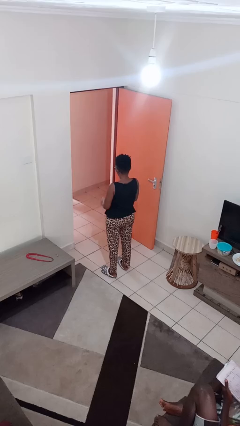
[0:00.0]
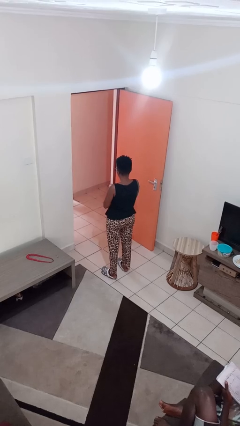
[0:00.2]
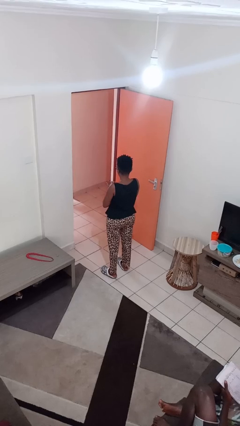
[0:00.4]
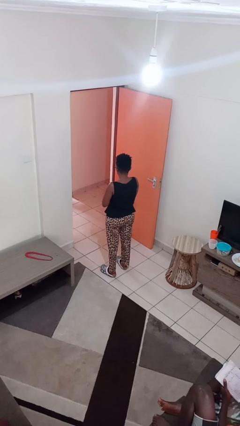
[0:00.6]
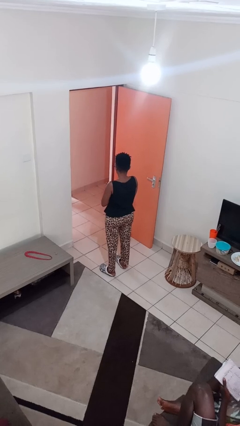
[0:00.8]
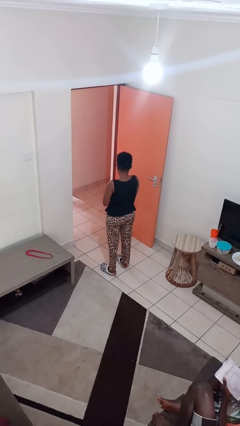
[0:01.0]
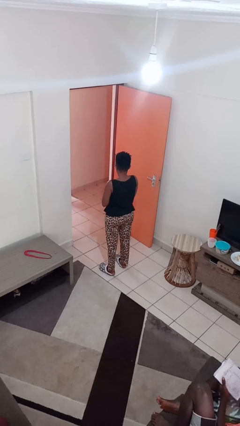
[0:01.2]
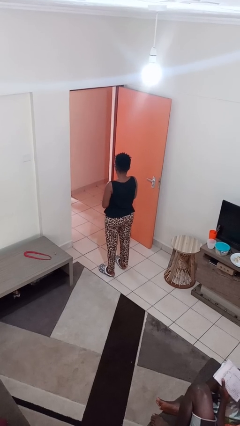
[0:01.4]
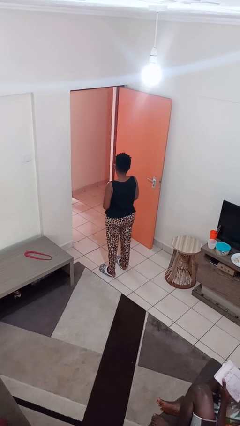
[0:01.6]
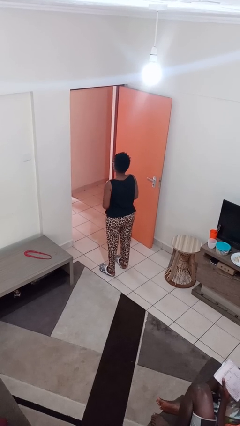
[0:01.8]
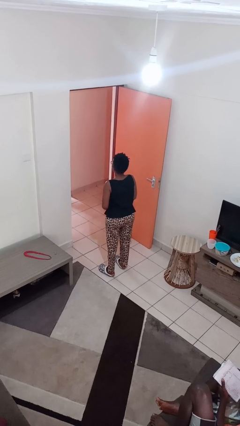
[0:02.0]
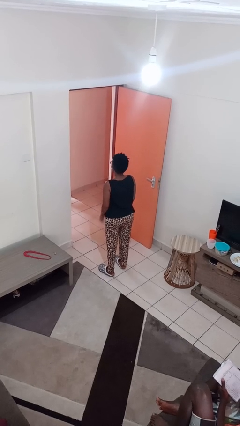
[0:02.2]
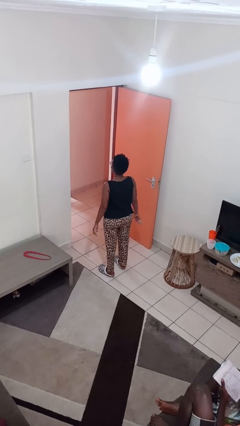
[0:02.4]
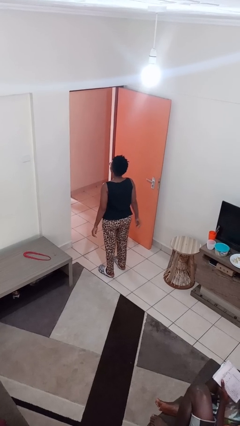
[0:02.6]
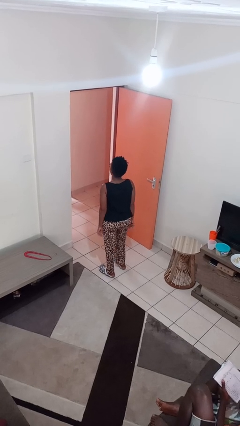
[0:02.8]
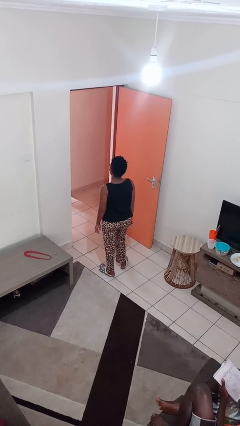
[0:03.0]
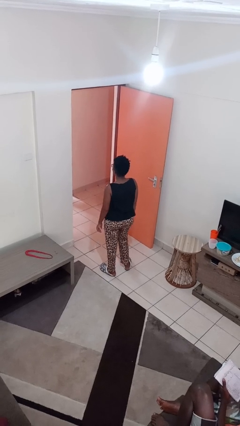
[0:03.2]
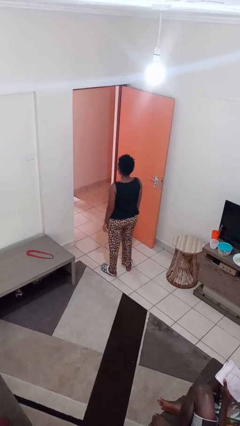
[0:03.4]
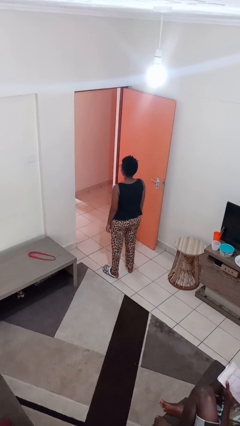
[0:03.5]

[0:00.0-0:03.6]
person takes off wristwatch

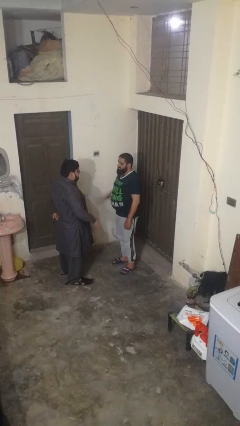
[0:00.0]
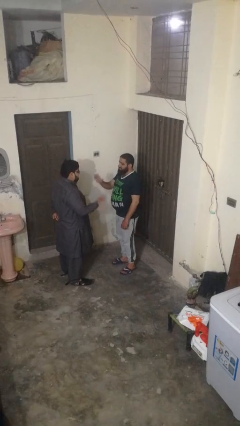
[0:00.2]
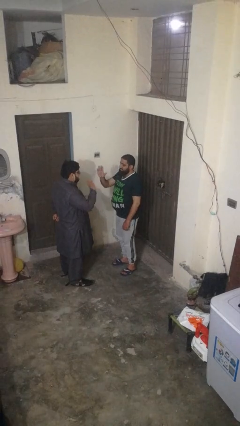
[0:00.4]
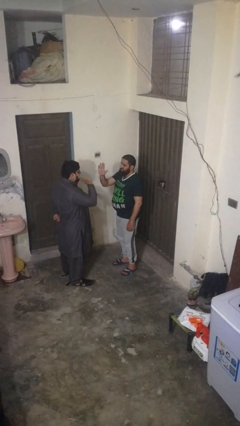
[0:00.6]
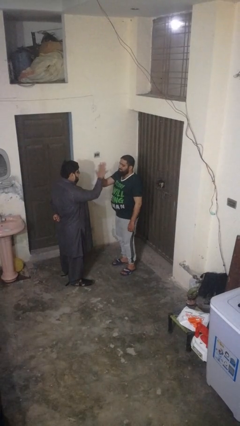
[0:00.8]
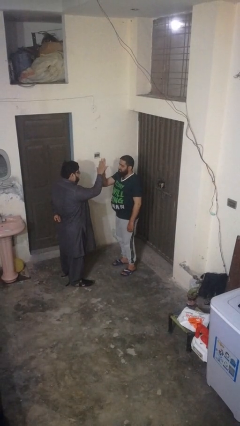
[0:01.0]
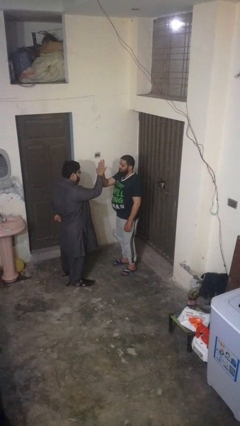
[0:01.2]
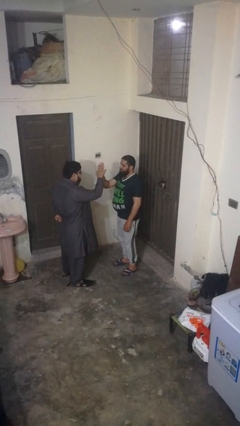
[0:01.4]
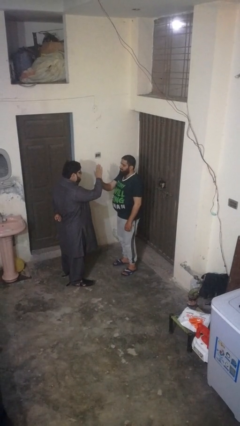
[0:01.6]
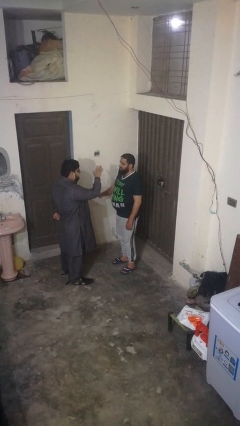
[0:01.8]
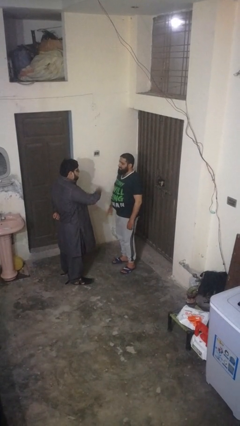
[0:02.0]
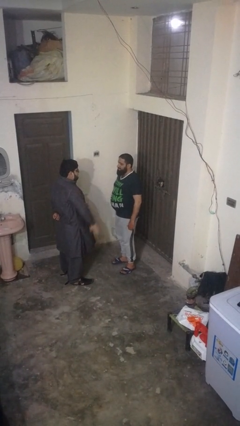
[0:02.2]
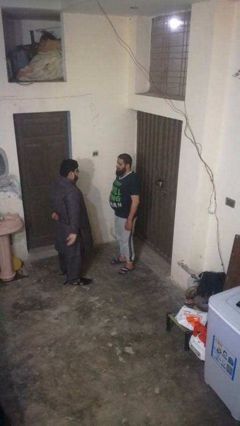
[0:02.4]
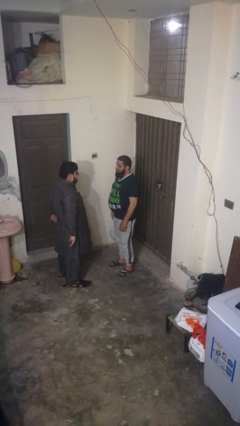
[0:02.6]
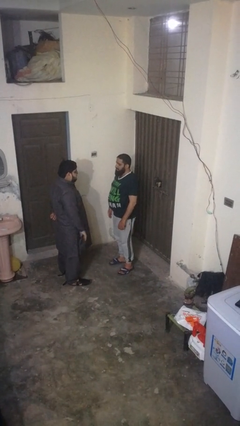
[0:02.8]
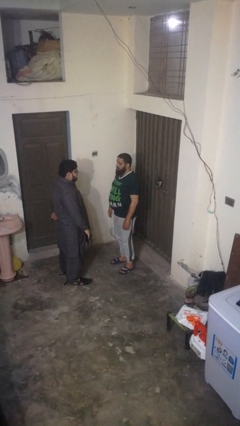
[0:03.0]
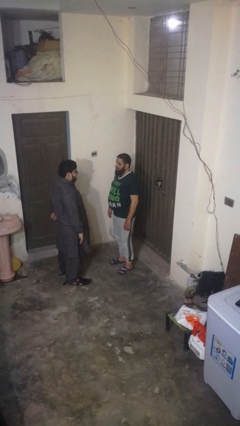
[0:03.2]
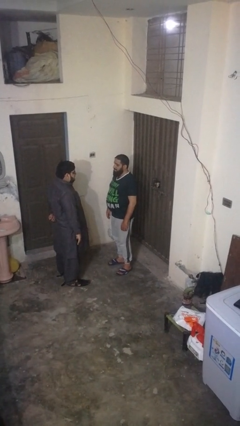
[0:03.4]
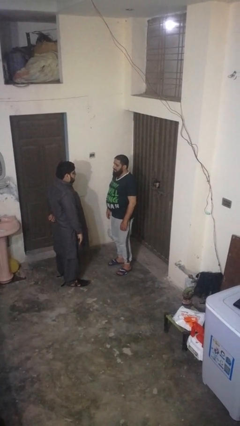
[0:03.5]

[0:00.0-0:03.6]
person highfives hand

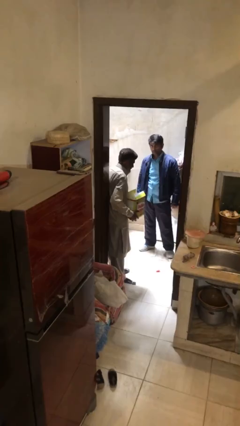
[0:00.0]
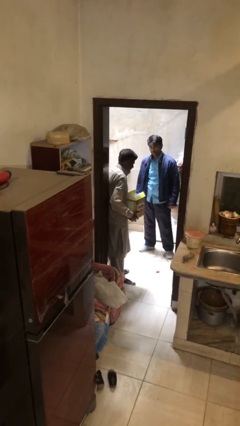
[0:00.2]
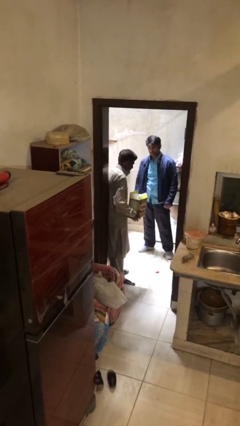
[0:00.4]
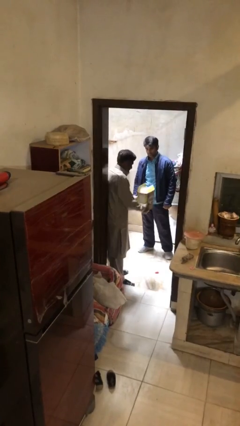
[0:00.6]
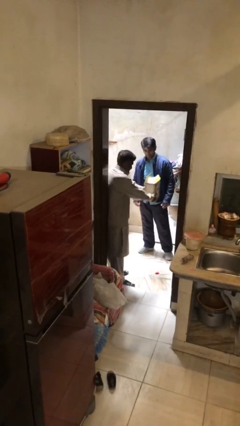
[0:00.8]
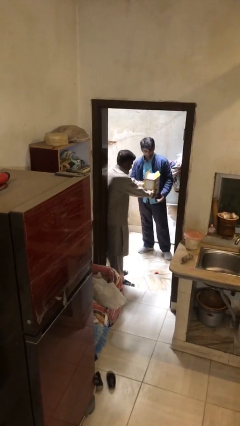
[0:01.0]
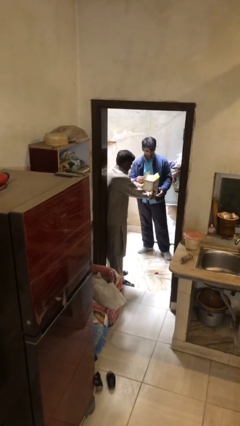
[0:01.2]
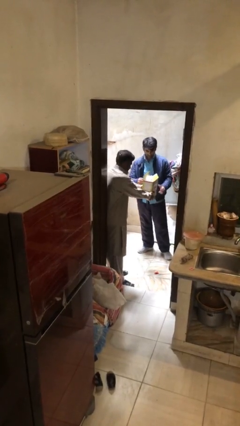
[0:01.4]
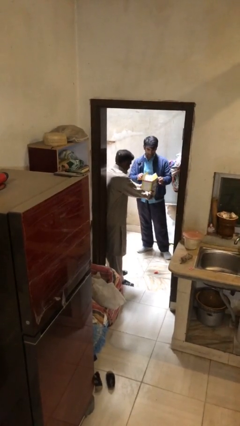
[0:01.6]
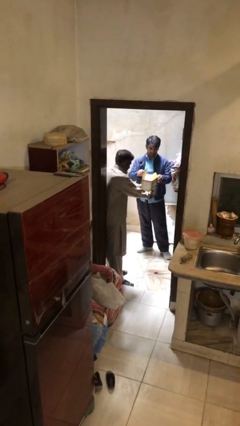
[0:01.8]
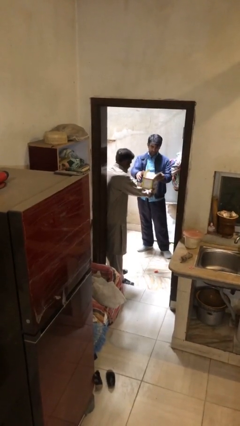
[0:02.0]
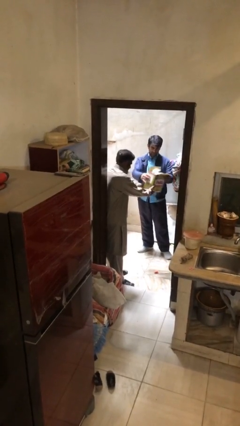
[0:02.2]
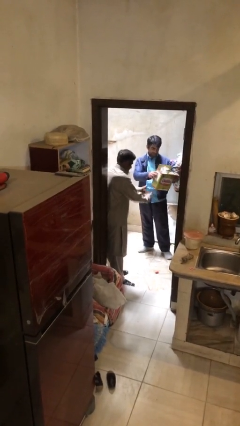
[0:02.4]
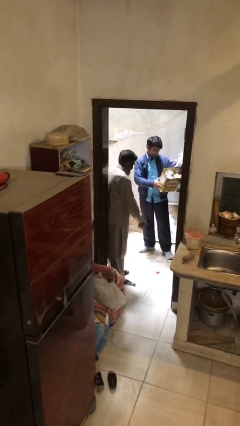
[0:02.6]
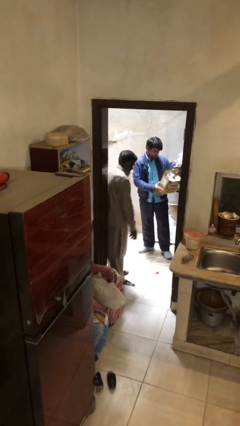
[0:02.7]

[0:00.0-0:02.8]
person transfers object to person

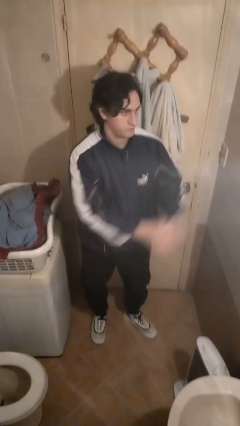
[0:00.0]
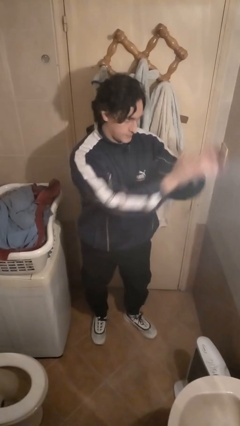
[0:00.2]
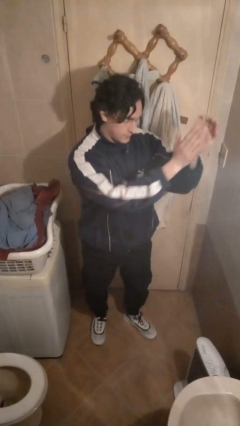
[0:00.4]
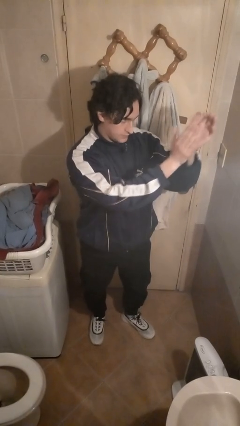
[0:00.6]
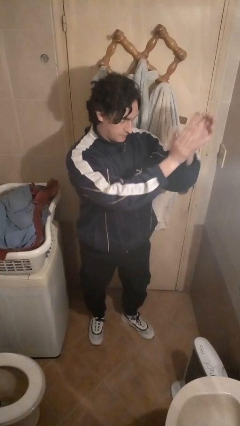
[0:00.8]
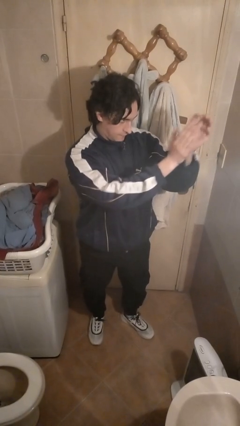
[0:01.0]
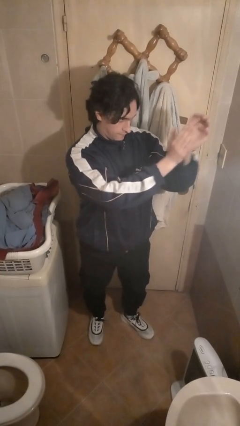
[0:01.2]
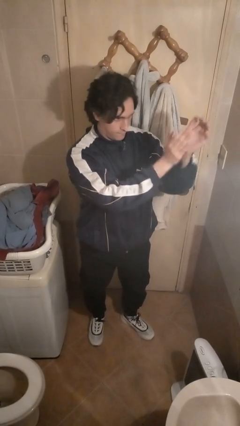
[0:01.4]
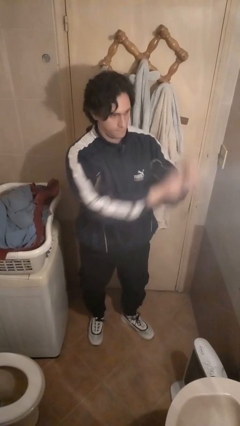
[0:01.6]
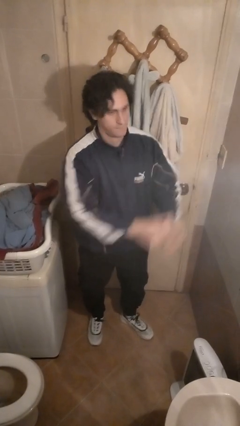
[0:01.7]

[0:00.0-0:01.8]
person claps hands

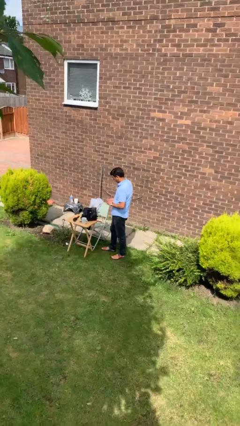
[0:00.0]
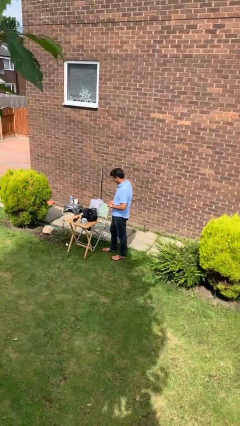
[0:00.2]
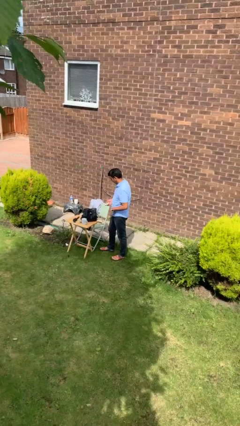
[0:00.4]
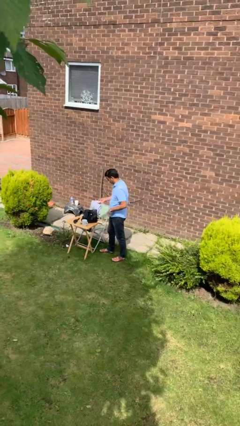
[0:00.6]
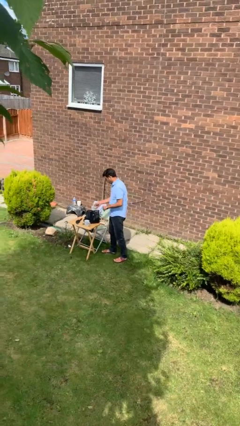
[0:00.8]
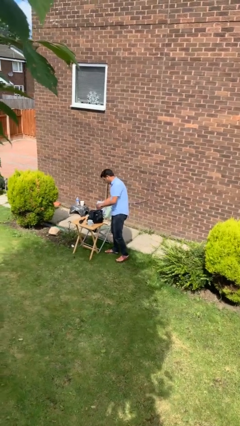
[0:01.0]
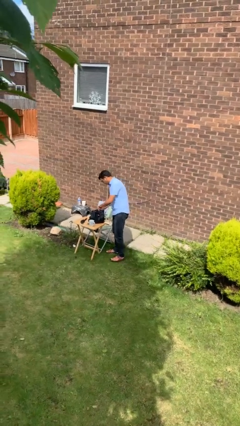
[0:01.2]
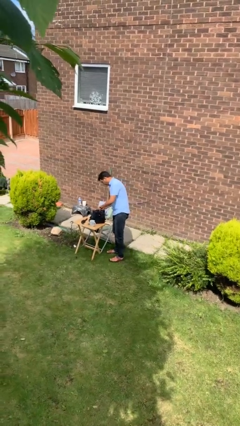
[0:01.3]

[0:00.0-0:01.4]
person puts object into backpack

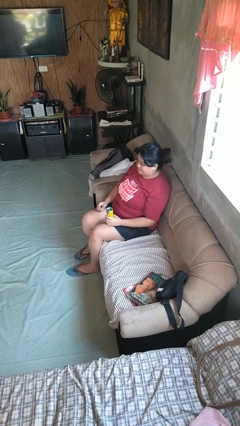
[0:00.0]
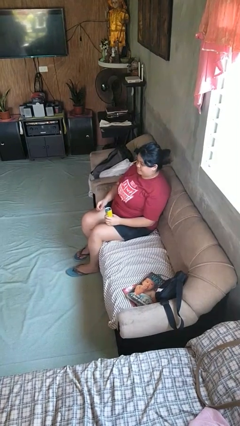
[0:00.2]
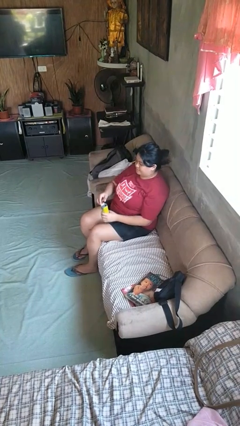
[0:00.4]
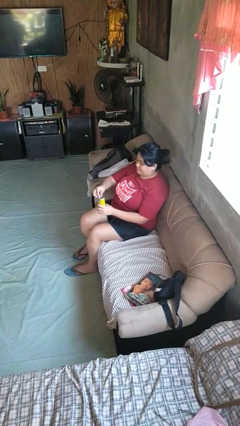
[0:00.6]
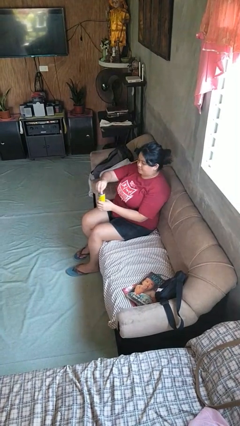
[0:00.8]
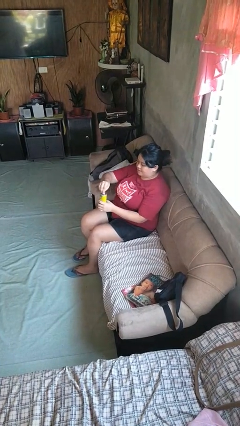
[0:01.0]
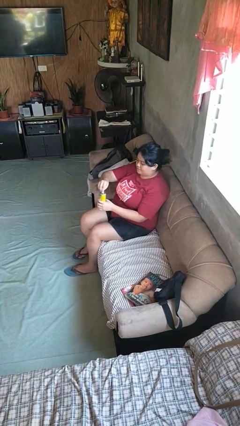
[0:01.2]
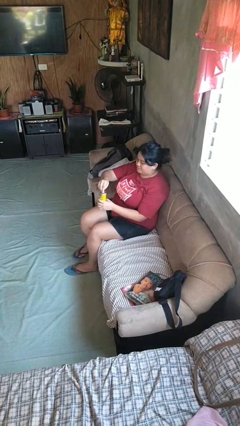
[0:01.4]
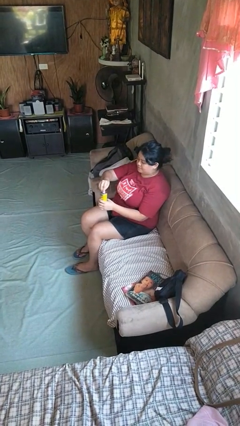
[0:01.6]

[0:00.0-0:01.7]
person opens beverage can

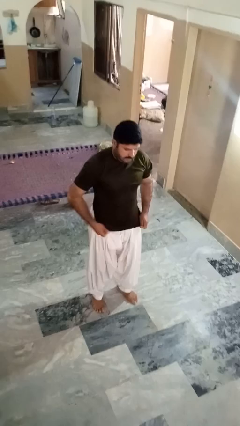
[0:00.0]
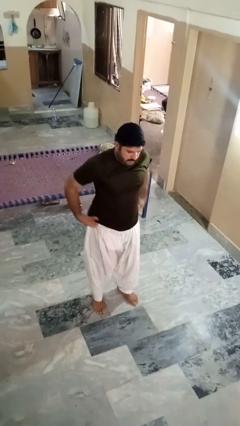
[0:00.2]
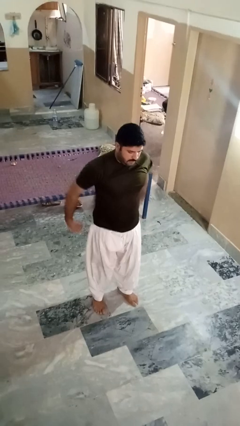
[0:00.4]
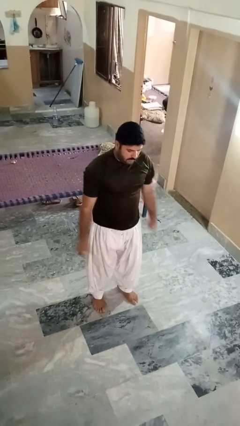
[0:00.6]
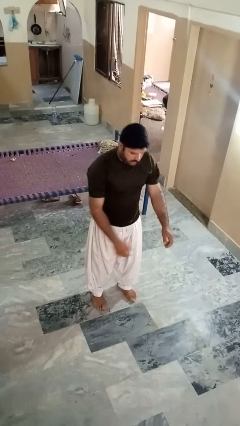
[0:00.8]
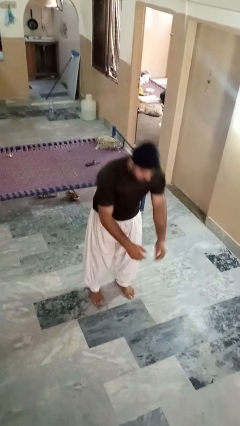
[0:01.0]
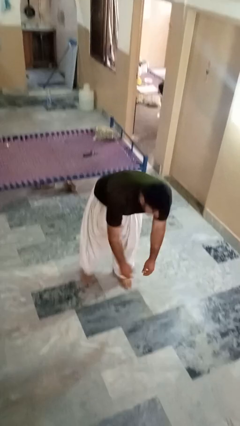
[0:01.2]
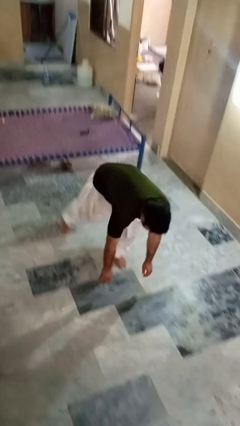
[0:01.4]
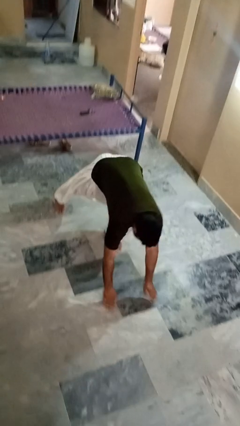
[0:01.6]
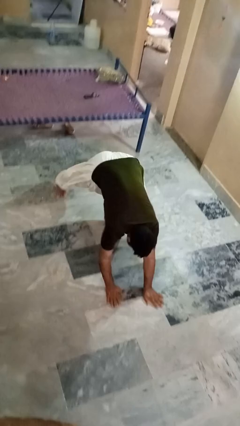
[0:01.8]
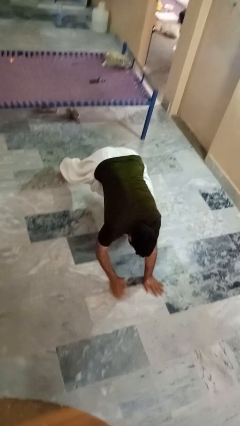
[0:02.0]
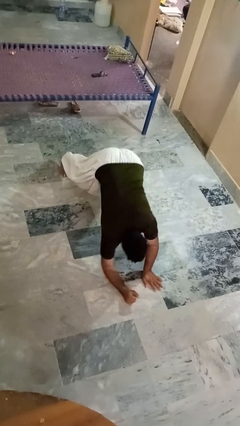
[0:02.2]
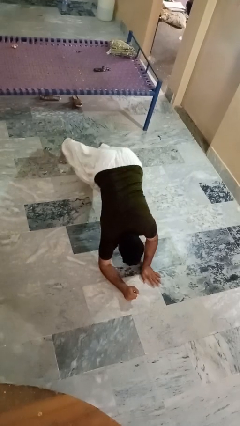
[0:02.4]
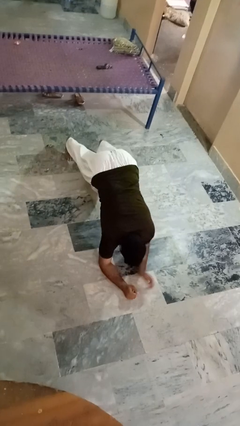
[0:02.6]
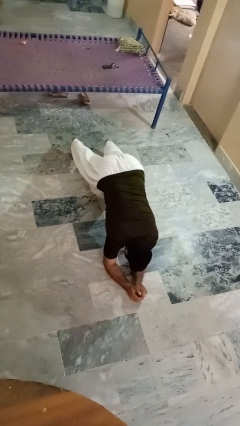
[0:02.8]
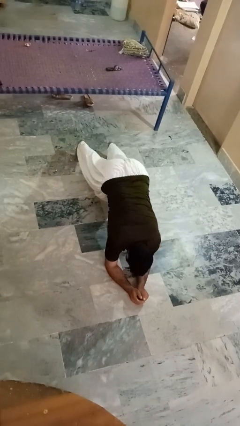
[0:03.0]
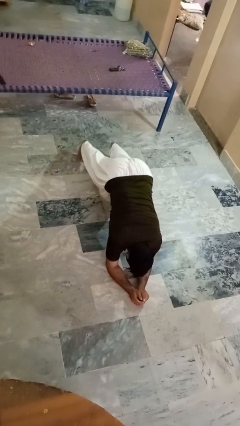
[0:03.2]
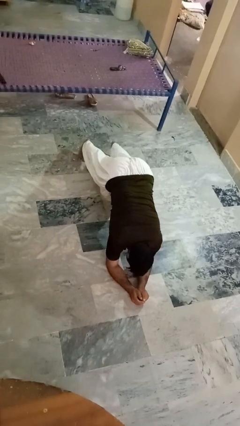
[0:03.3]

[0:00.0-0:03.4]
person exercises with plank
